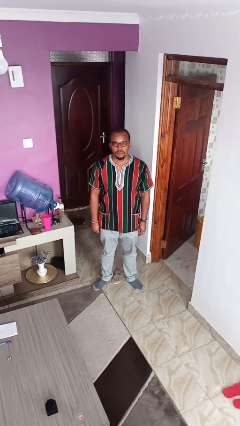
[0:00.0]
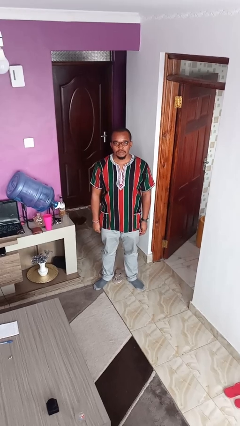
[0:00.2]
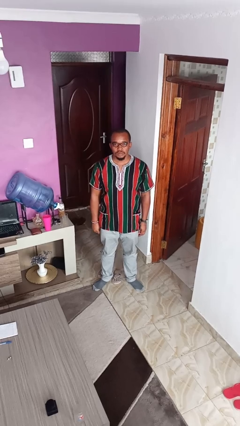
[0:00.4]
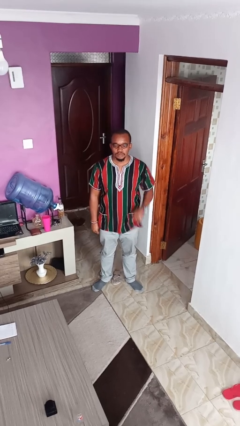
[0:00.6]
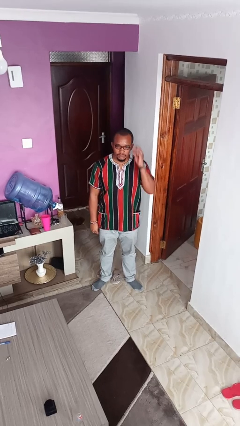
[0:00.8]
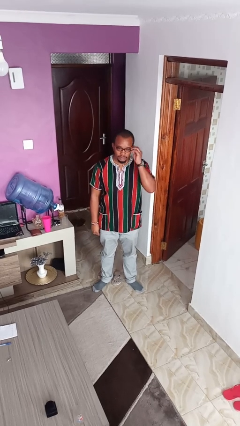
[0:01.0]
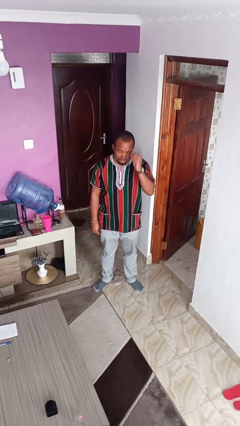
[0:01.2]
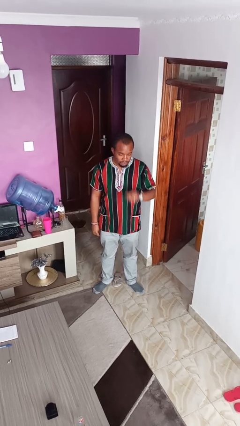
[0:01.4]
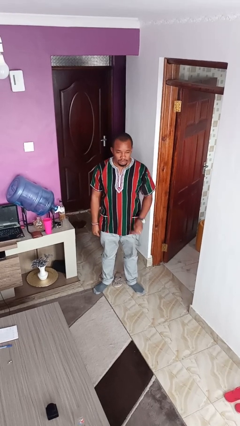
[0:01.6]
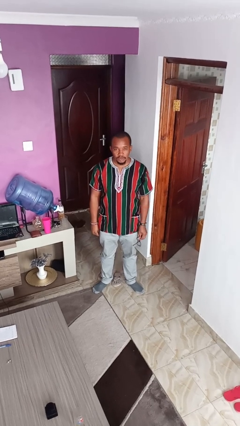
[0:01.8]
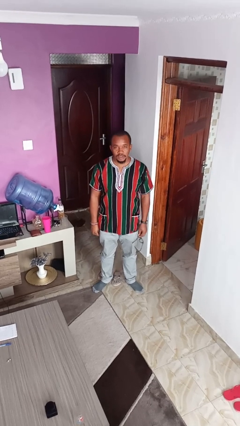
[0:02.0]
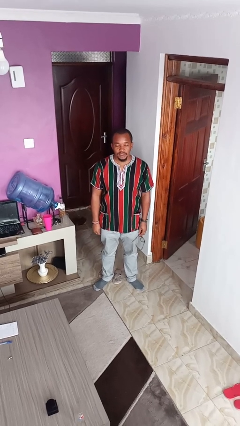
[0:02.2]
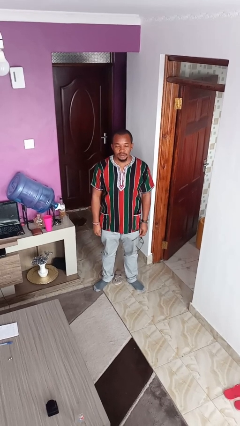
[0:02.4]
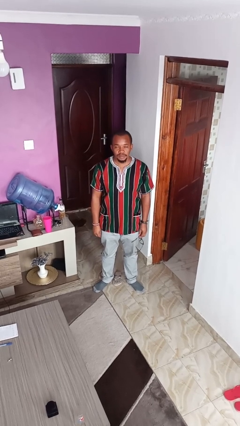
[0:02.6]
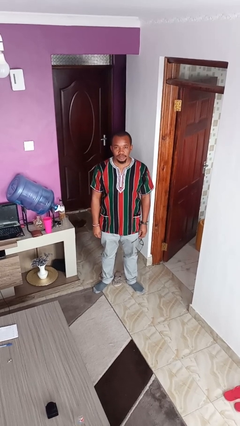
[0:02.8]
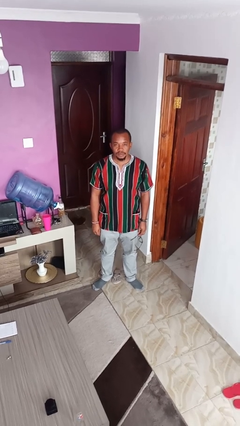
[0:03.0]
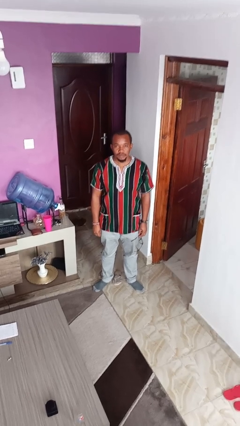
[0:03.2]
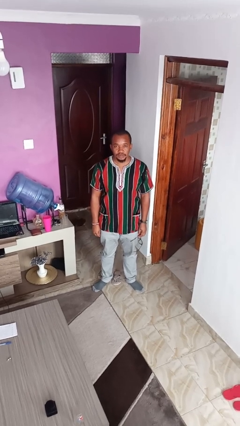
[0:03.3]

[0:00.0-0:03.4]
person takes off glasses

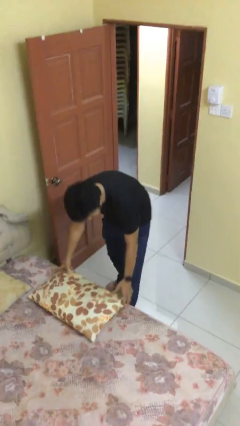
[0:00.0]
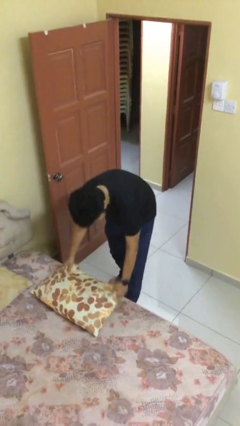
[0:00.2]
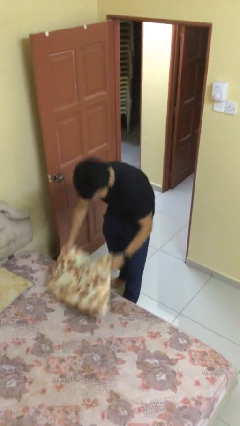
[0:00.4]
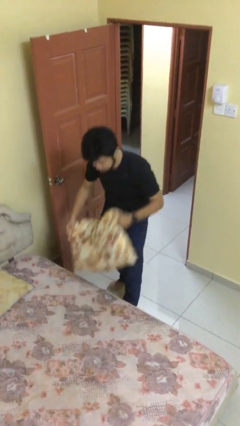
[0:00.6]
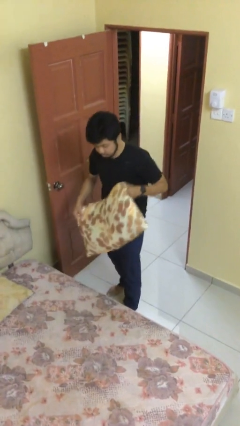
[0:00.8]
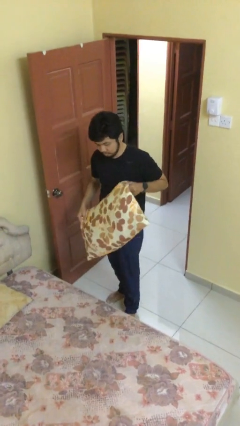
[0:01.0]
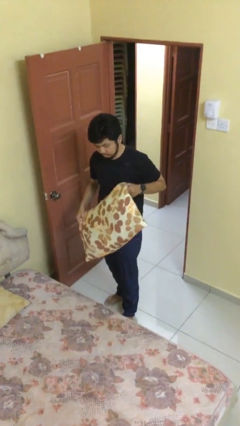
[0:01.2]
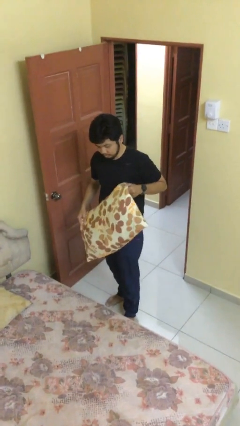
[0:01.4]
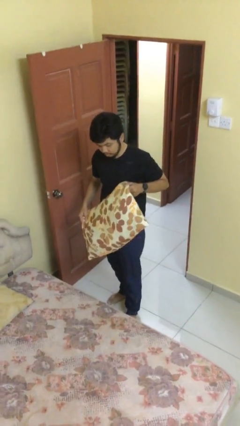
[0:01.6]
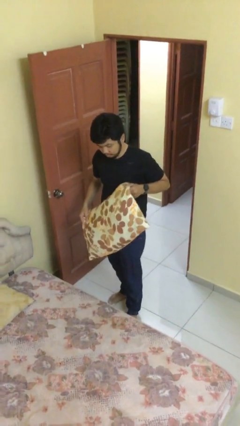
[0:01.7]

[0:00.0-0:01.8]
person picks up object from bed

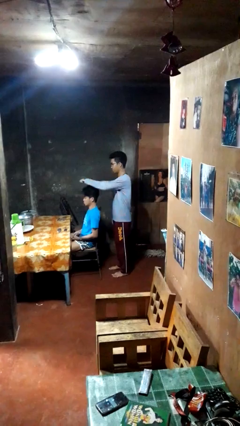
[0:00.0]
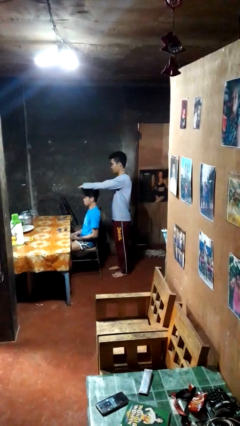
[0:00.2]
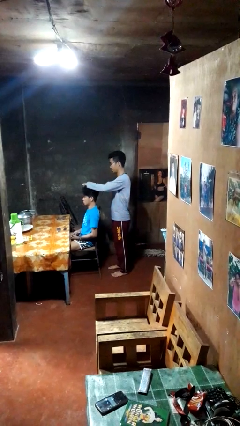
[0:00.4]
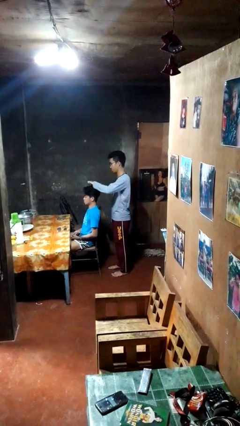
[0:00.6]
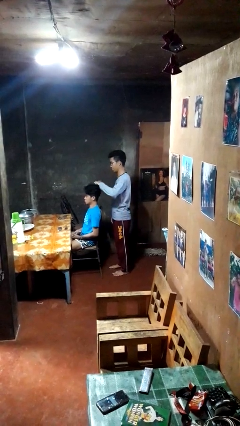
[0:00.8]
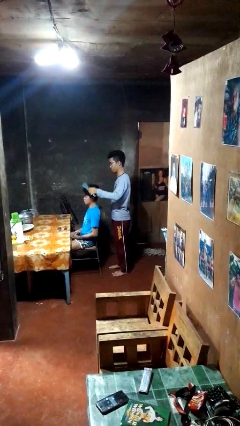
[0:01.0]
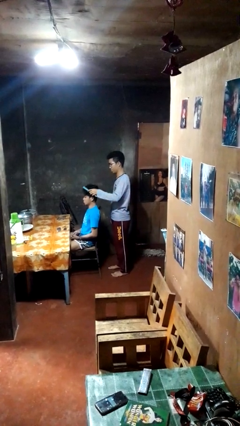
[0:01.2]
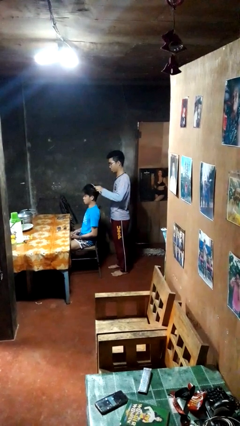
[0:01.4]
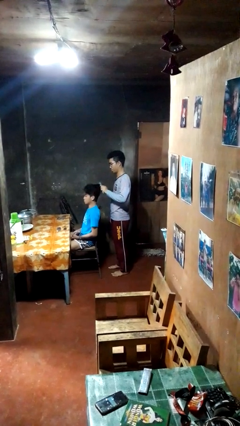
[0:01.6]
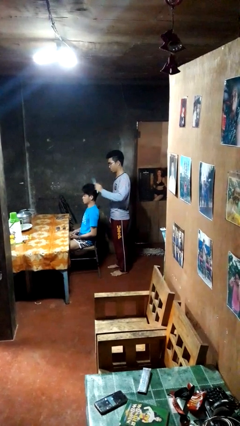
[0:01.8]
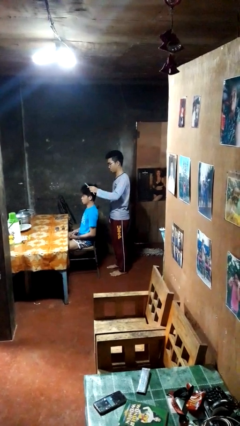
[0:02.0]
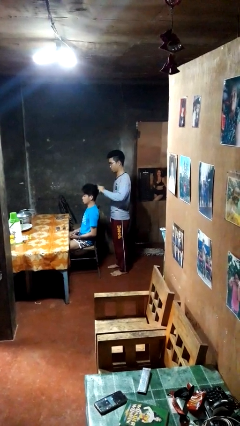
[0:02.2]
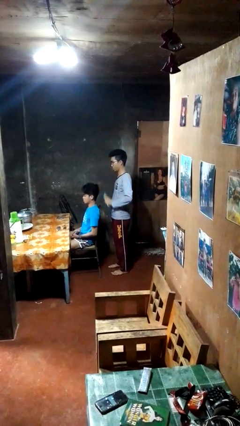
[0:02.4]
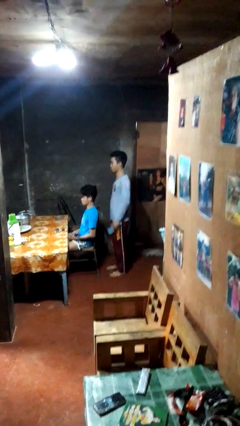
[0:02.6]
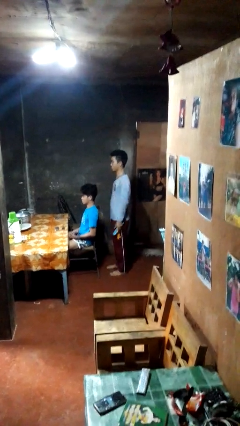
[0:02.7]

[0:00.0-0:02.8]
person brushes hair of person

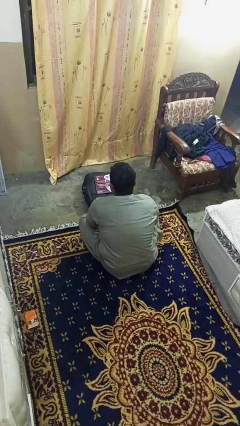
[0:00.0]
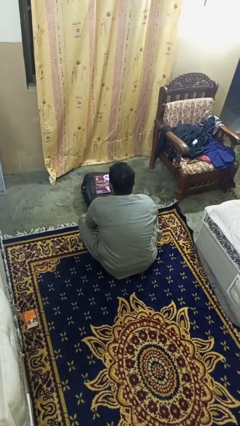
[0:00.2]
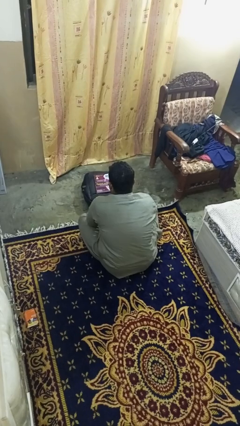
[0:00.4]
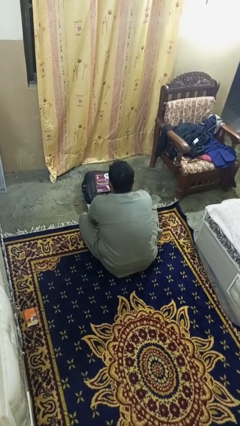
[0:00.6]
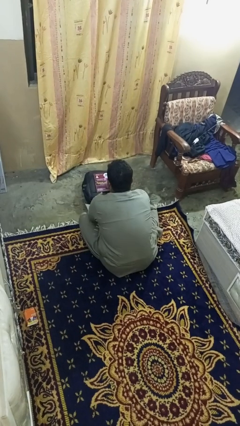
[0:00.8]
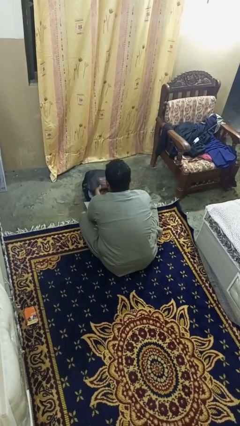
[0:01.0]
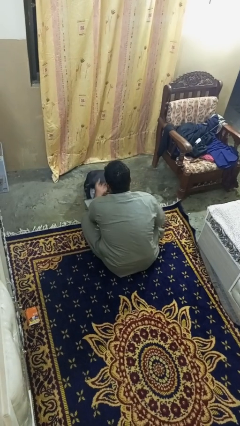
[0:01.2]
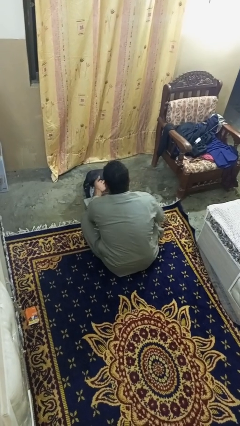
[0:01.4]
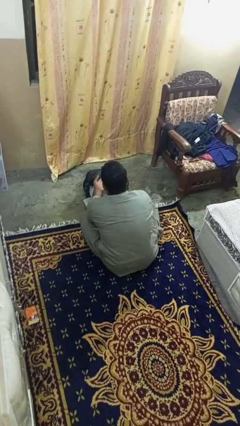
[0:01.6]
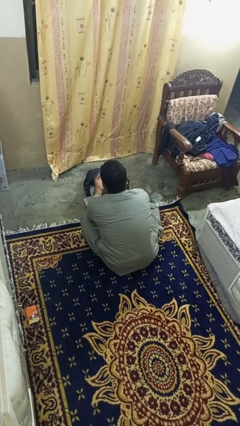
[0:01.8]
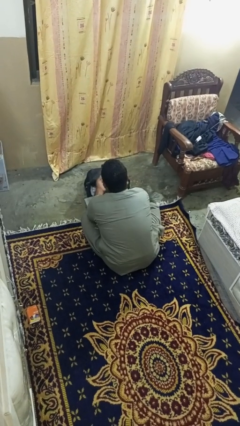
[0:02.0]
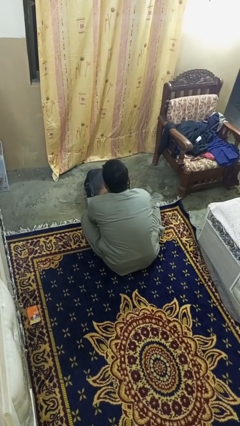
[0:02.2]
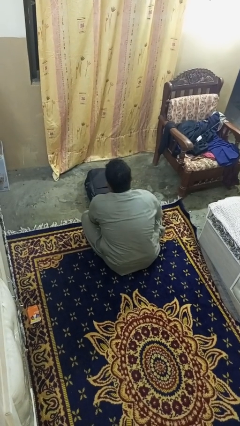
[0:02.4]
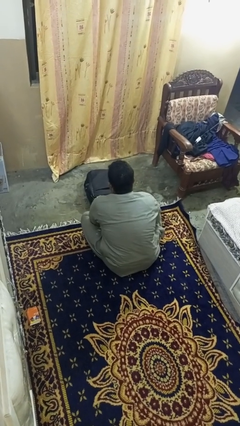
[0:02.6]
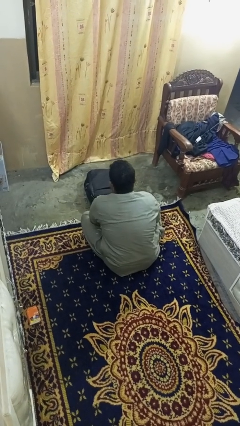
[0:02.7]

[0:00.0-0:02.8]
person puts object into bag

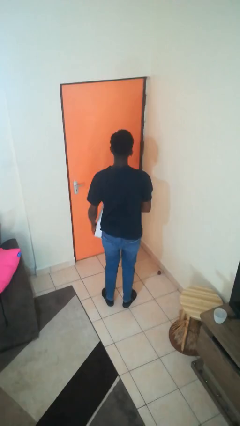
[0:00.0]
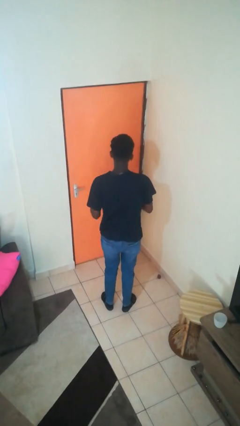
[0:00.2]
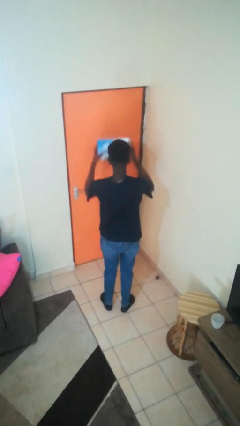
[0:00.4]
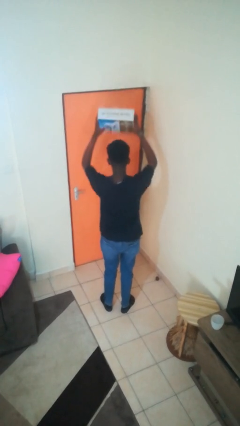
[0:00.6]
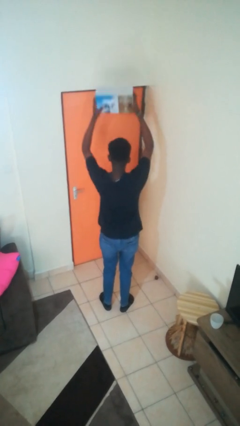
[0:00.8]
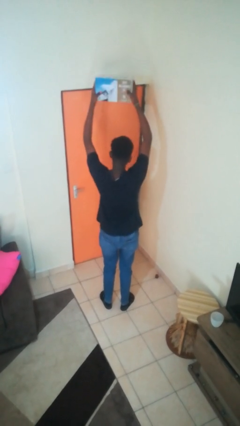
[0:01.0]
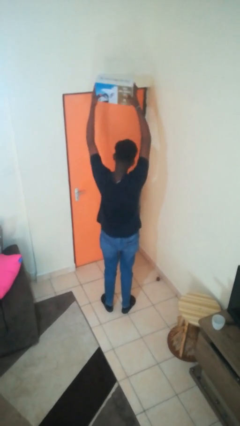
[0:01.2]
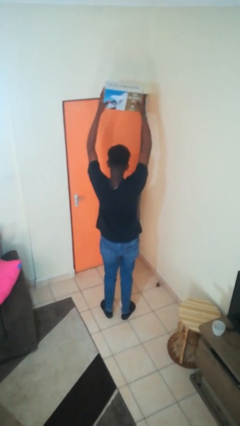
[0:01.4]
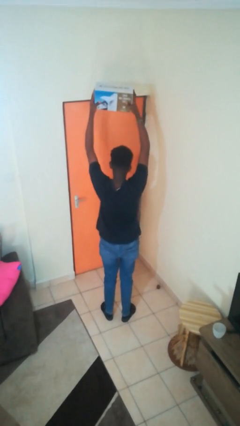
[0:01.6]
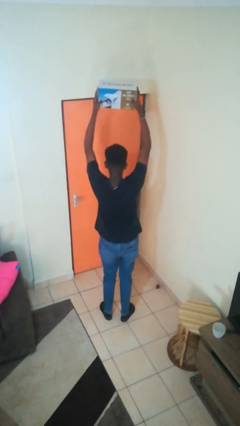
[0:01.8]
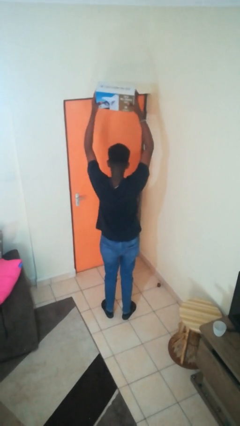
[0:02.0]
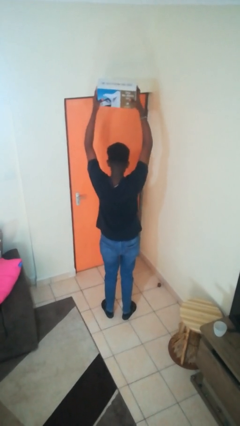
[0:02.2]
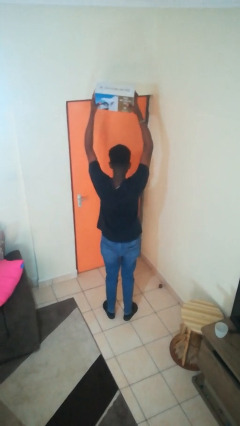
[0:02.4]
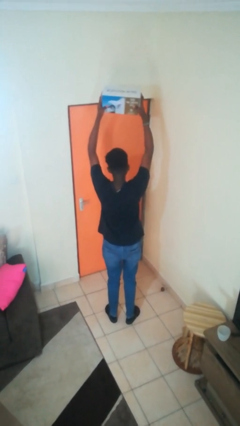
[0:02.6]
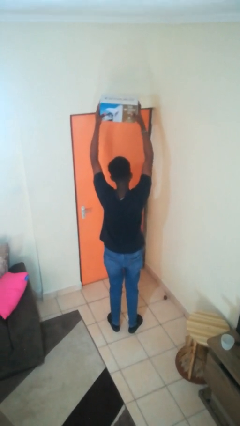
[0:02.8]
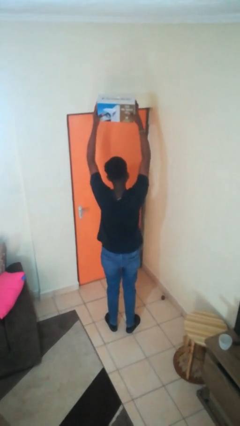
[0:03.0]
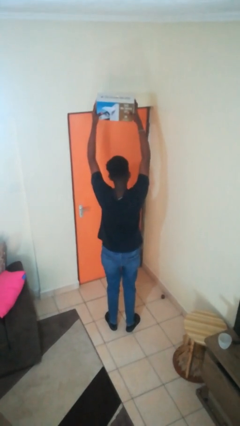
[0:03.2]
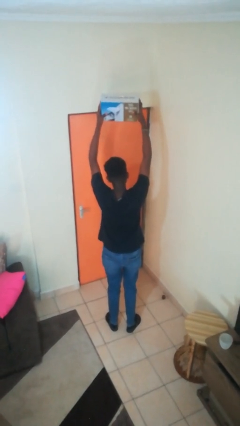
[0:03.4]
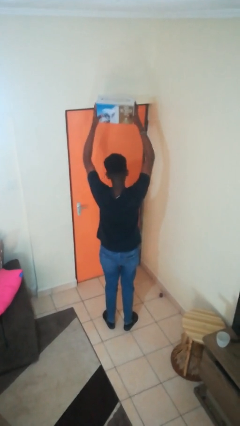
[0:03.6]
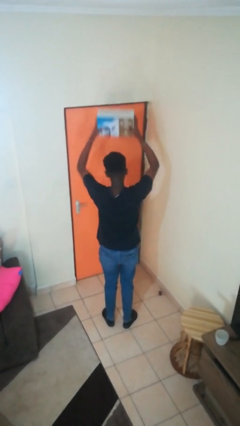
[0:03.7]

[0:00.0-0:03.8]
person holds object above head

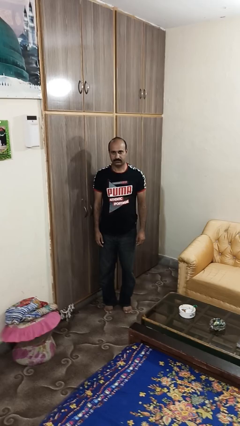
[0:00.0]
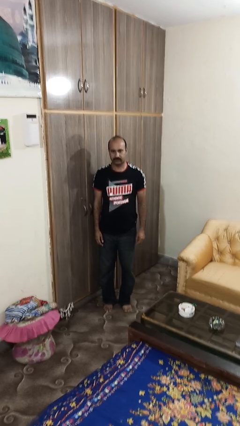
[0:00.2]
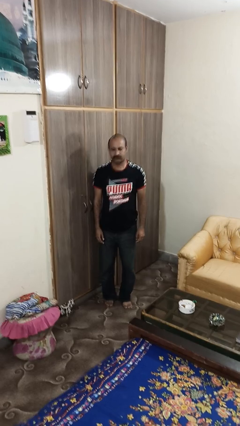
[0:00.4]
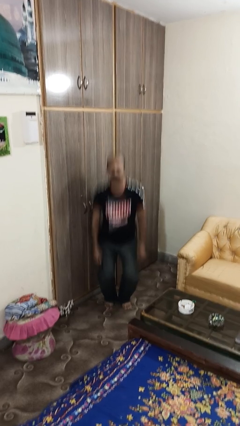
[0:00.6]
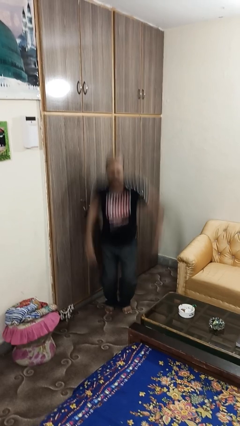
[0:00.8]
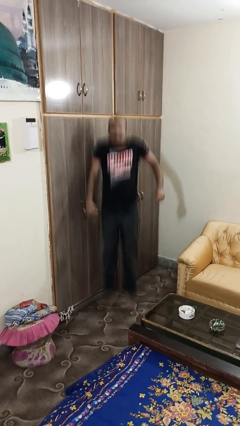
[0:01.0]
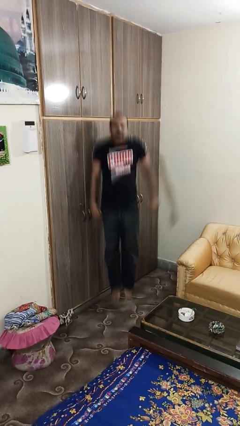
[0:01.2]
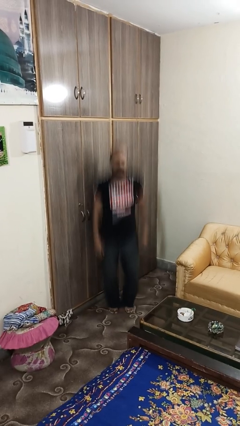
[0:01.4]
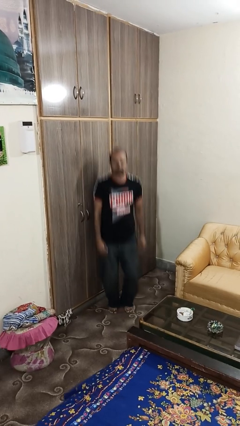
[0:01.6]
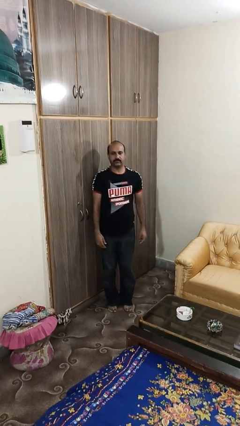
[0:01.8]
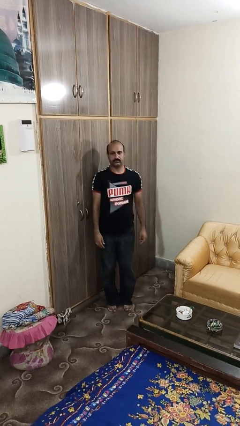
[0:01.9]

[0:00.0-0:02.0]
person jumps

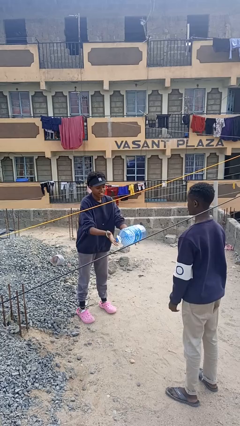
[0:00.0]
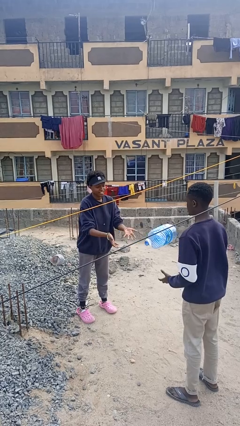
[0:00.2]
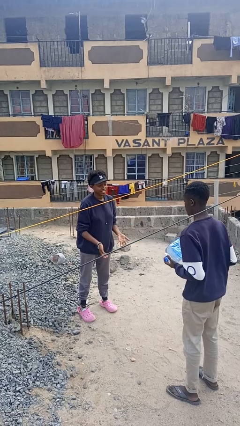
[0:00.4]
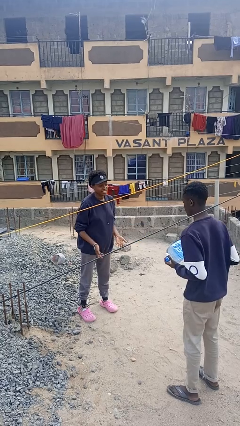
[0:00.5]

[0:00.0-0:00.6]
person catches object from person
